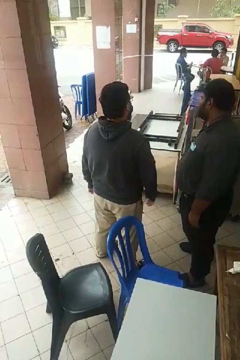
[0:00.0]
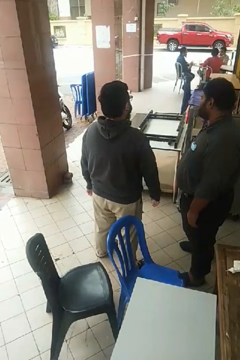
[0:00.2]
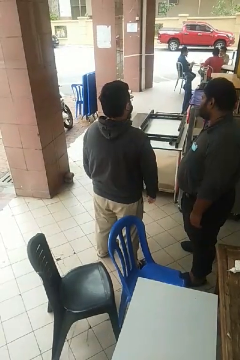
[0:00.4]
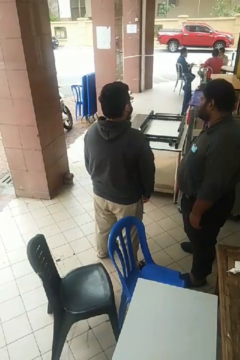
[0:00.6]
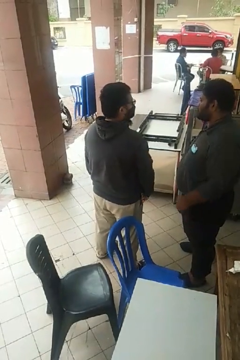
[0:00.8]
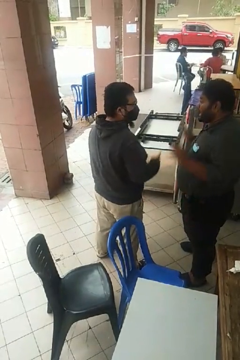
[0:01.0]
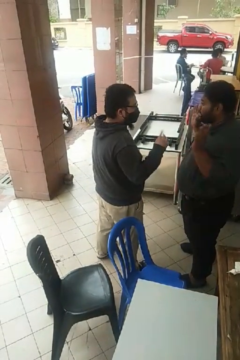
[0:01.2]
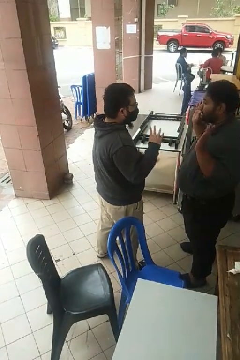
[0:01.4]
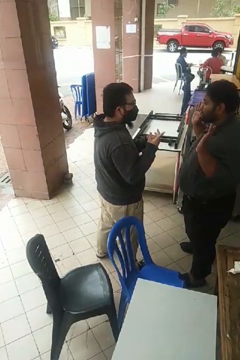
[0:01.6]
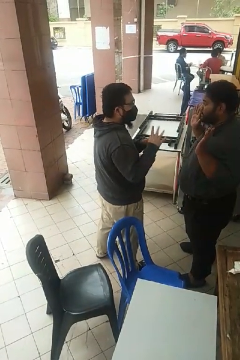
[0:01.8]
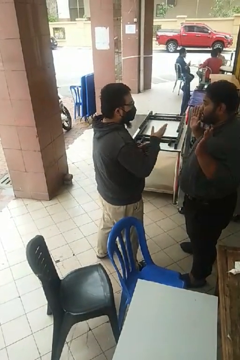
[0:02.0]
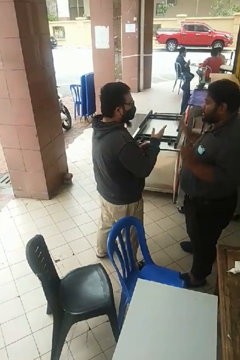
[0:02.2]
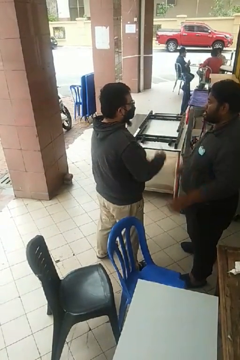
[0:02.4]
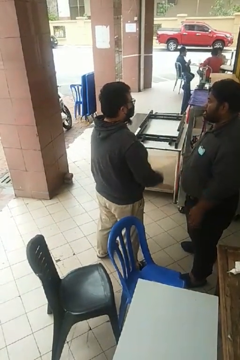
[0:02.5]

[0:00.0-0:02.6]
person talks to person

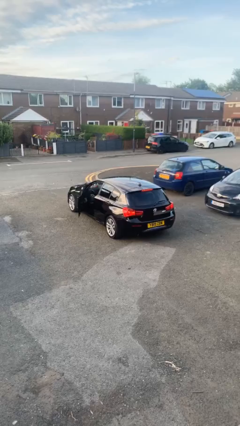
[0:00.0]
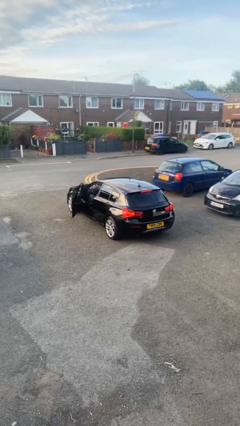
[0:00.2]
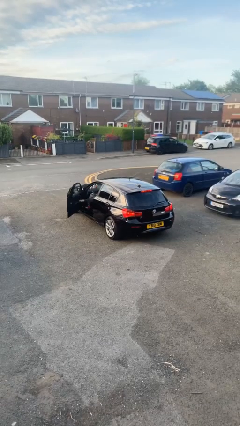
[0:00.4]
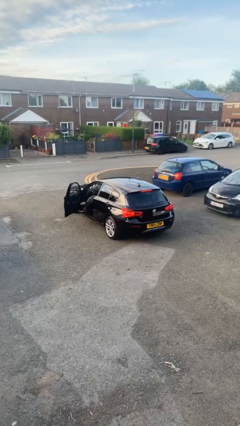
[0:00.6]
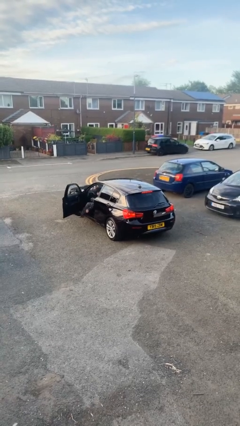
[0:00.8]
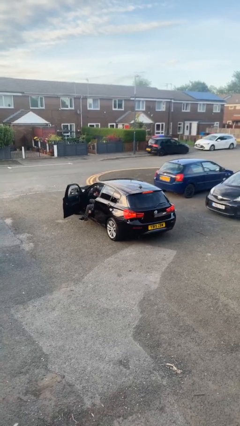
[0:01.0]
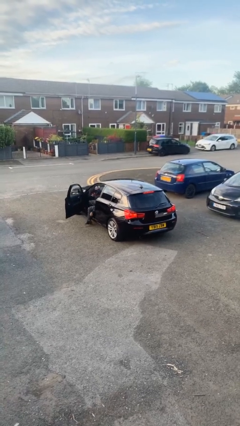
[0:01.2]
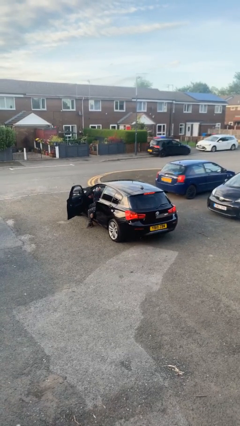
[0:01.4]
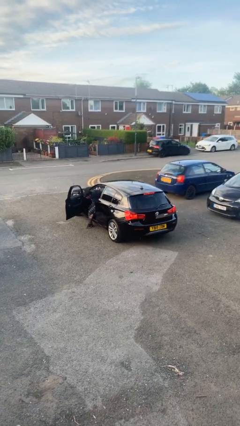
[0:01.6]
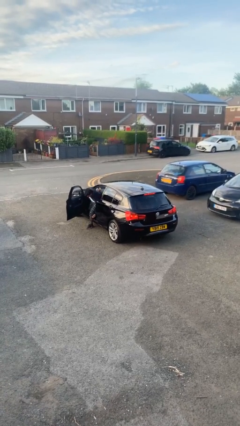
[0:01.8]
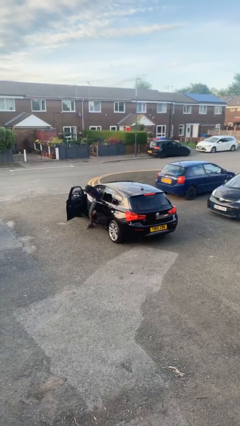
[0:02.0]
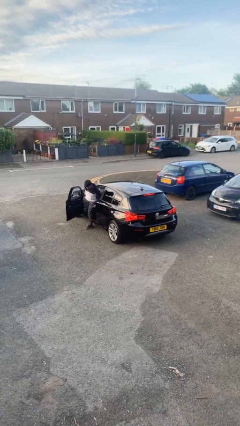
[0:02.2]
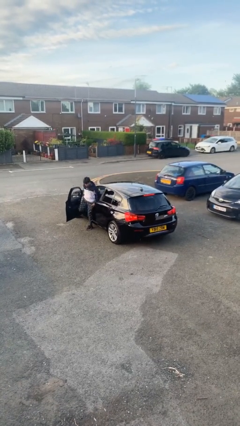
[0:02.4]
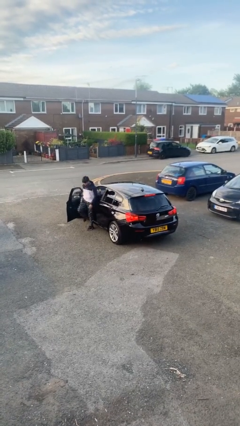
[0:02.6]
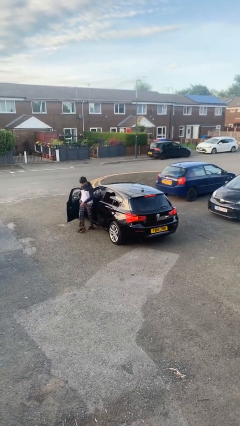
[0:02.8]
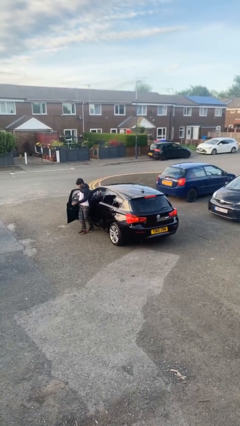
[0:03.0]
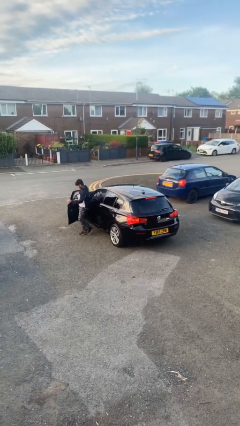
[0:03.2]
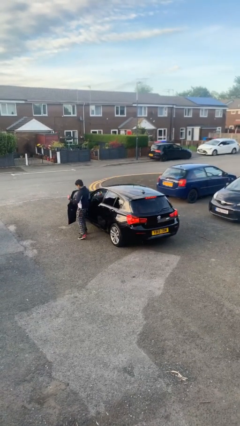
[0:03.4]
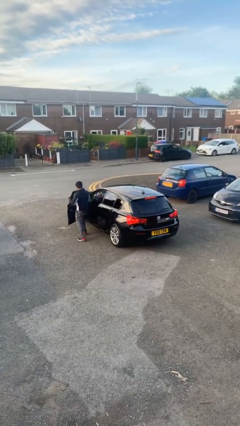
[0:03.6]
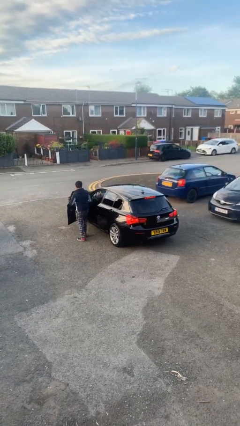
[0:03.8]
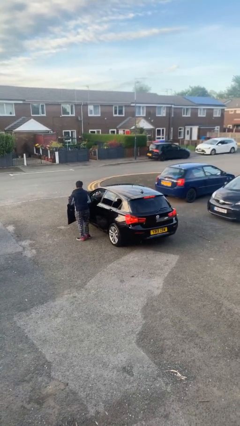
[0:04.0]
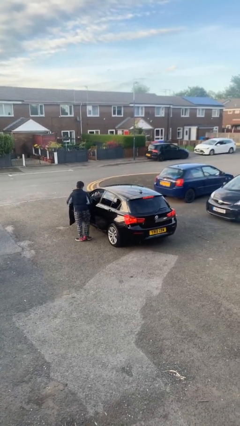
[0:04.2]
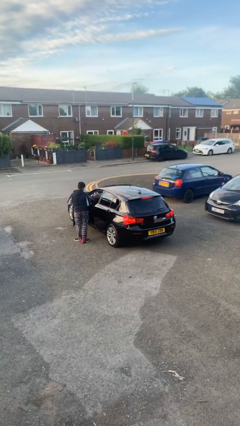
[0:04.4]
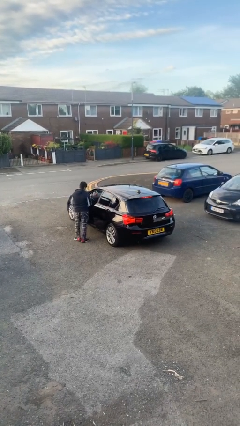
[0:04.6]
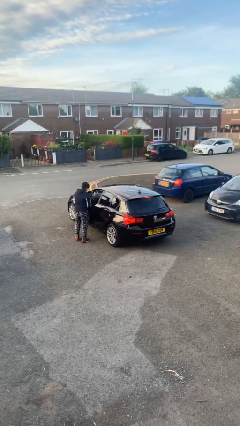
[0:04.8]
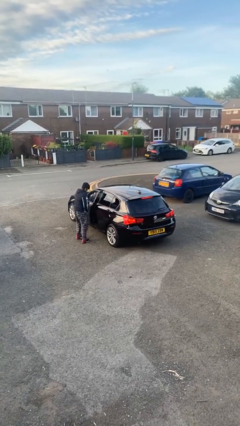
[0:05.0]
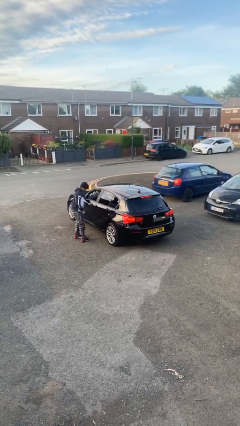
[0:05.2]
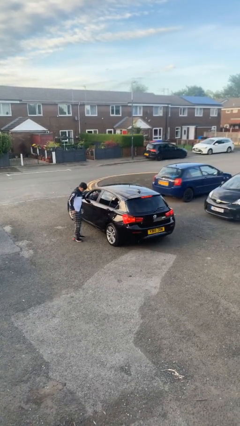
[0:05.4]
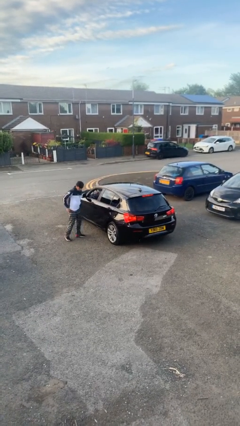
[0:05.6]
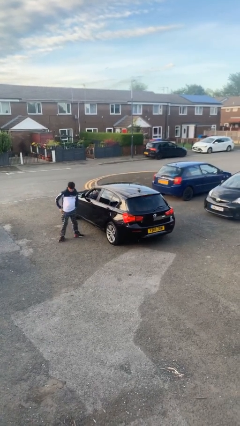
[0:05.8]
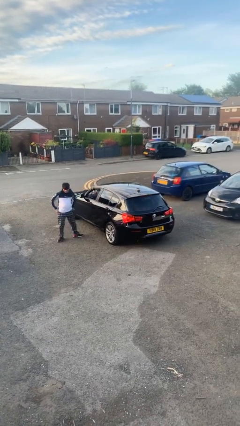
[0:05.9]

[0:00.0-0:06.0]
car drops off person

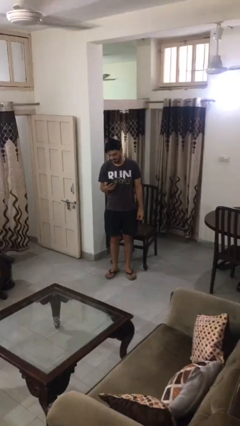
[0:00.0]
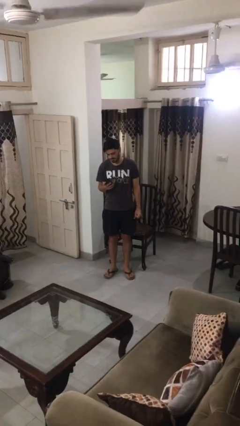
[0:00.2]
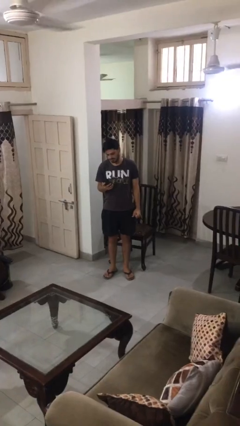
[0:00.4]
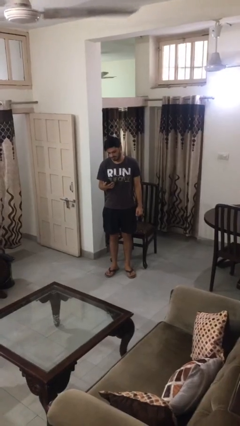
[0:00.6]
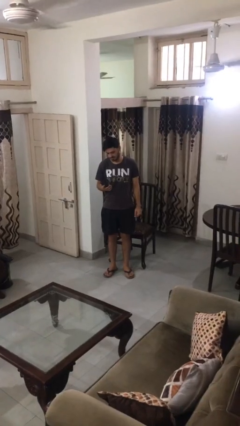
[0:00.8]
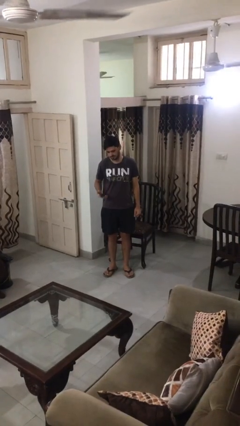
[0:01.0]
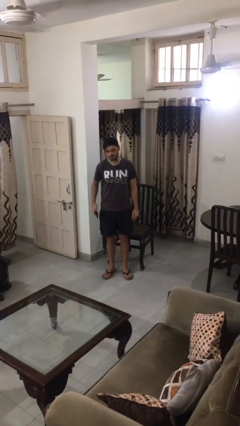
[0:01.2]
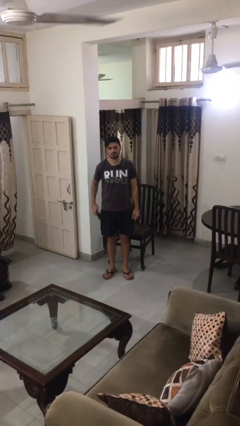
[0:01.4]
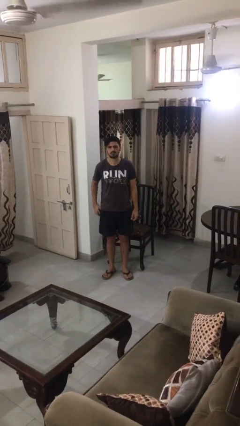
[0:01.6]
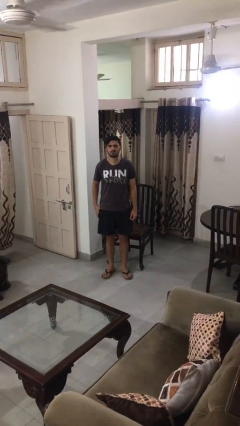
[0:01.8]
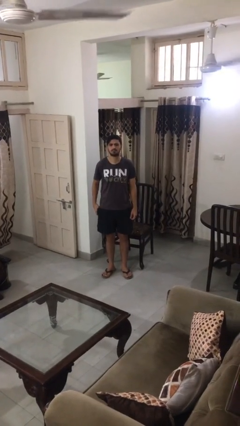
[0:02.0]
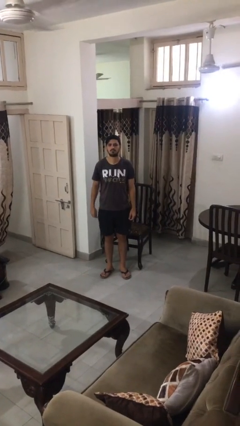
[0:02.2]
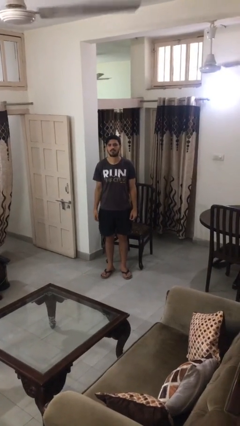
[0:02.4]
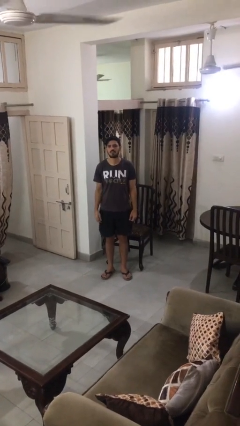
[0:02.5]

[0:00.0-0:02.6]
person puts phone into pocket

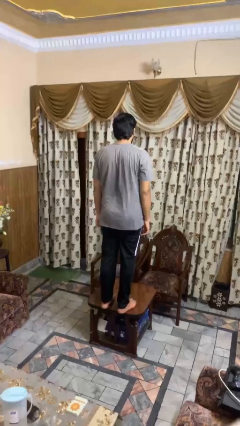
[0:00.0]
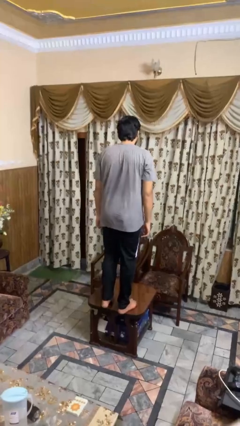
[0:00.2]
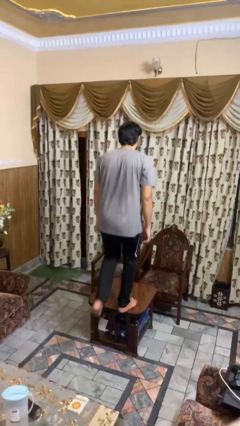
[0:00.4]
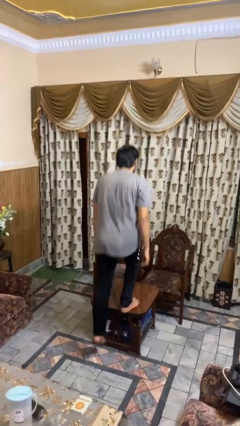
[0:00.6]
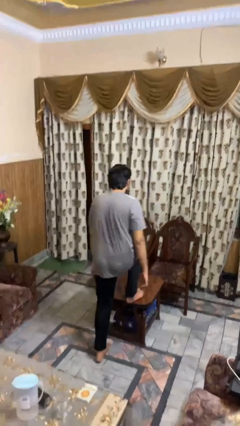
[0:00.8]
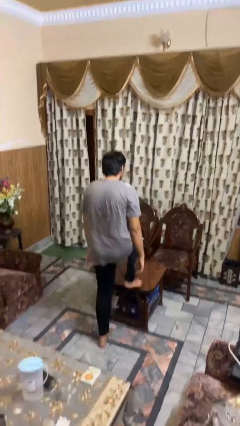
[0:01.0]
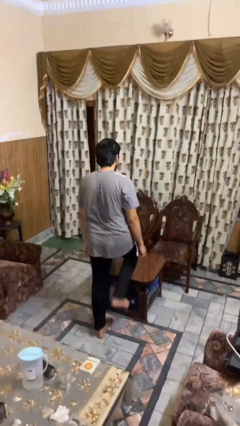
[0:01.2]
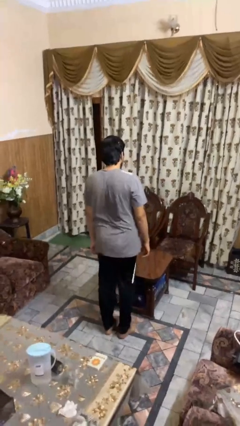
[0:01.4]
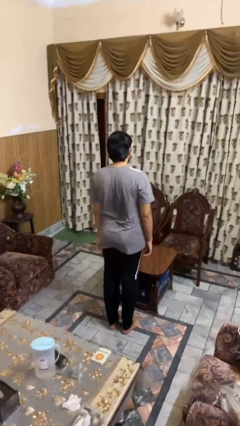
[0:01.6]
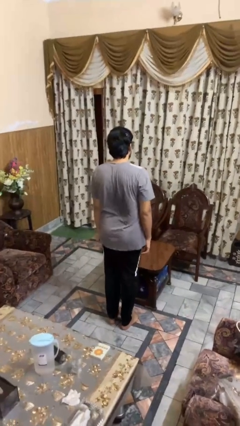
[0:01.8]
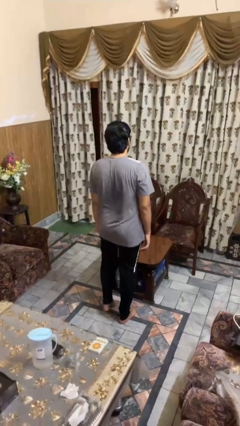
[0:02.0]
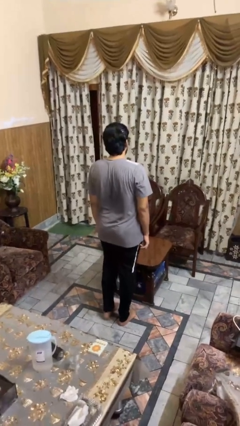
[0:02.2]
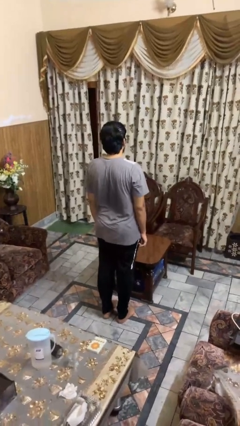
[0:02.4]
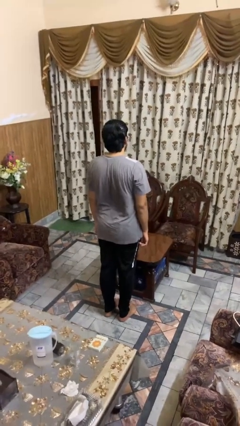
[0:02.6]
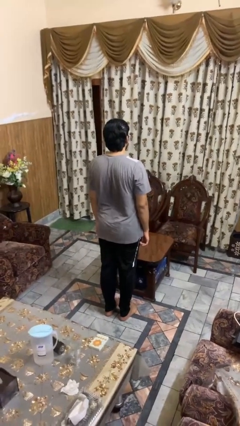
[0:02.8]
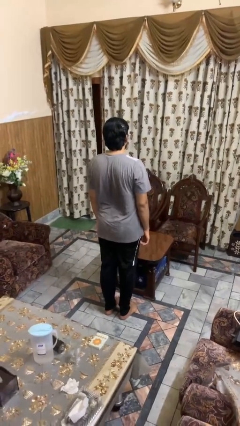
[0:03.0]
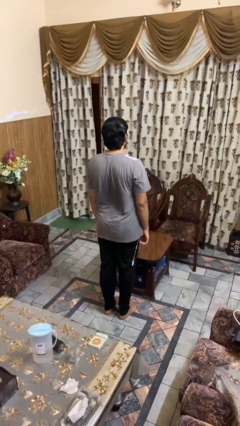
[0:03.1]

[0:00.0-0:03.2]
person climbs off table

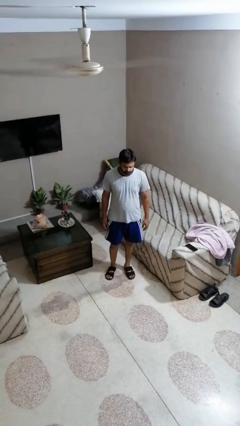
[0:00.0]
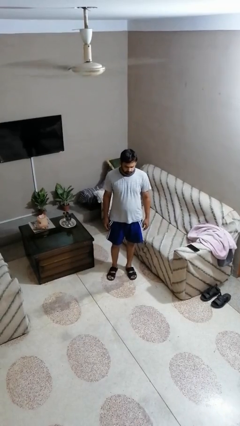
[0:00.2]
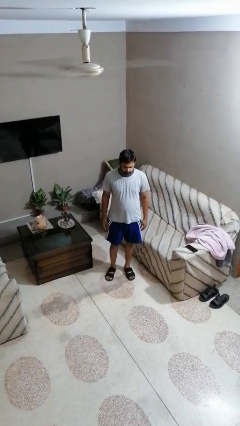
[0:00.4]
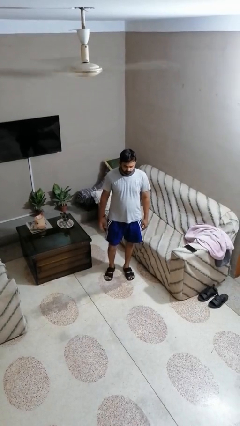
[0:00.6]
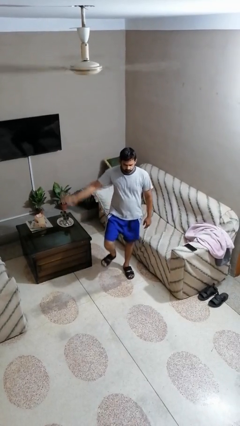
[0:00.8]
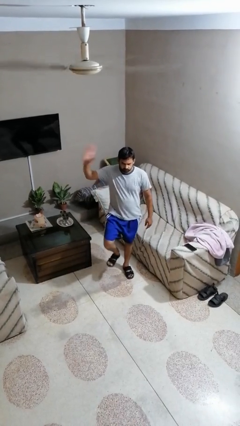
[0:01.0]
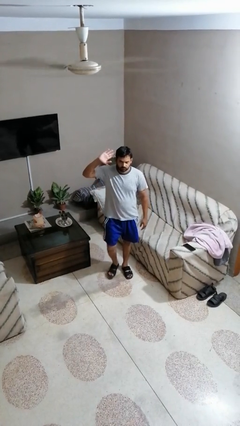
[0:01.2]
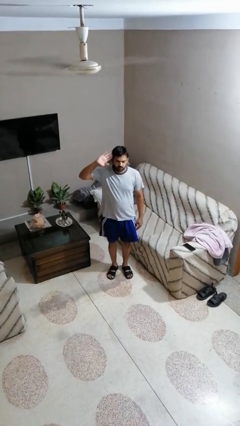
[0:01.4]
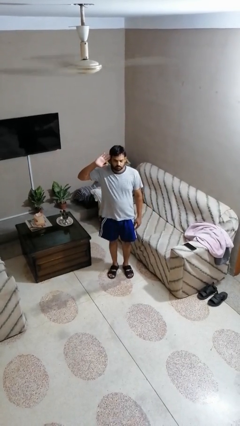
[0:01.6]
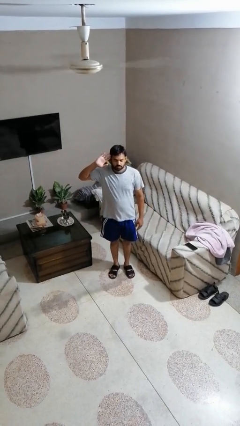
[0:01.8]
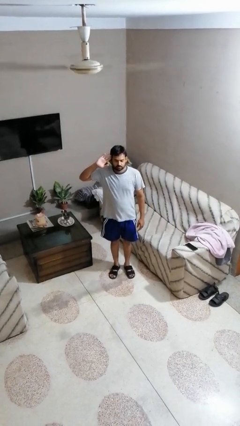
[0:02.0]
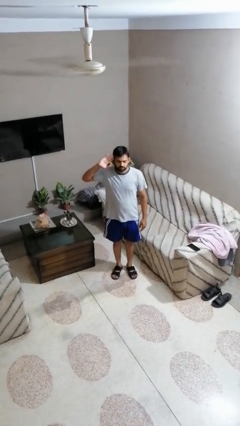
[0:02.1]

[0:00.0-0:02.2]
person salutes

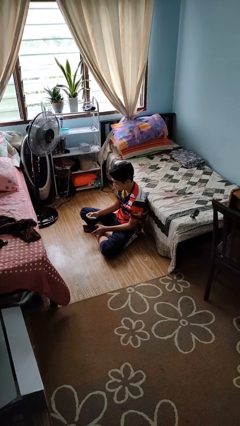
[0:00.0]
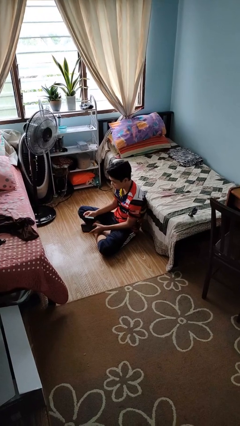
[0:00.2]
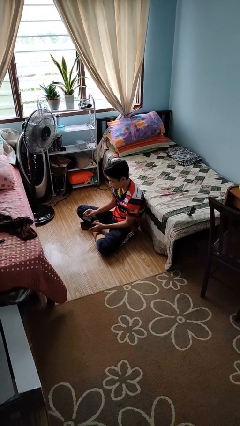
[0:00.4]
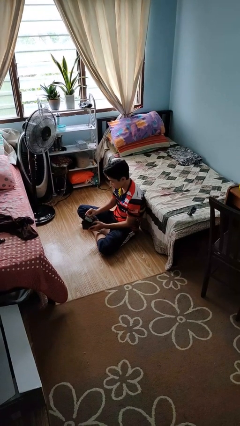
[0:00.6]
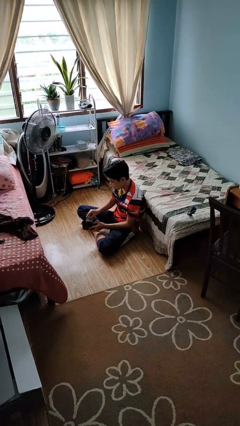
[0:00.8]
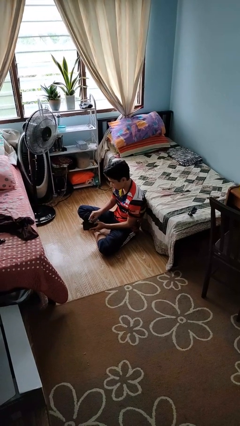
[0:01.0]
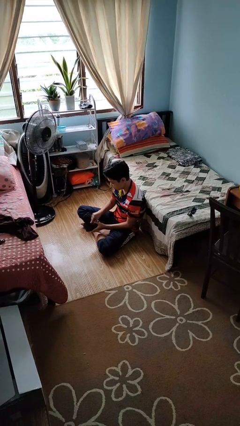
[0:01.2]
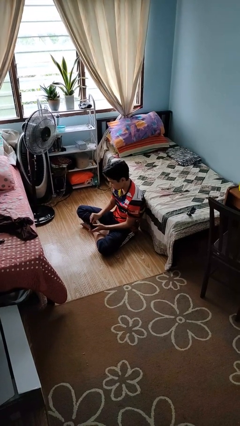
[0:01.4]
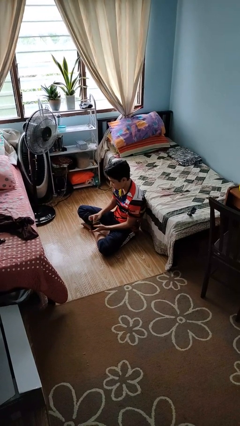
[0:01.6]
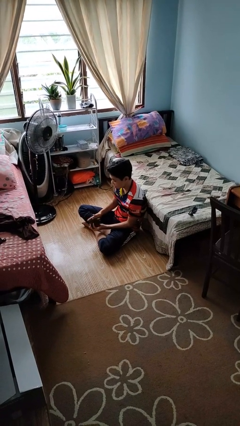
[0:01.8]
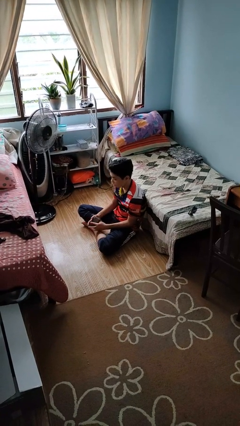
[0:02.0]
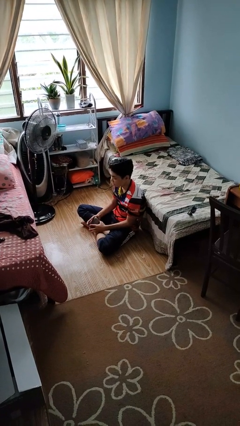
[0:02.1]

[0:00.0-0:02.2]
person puts object into purse
